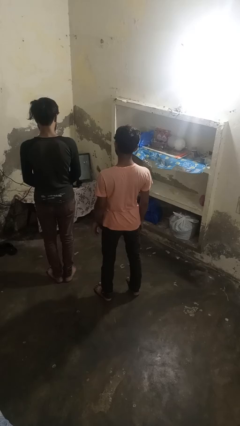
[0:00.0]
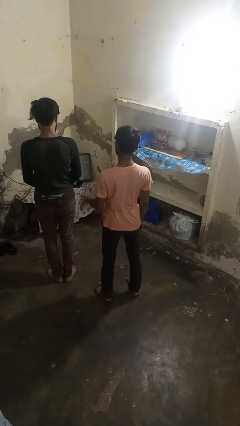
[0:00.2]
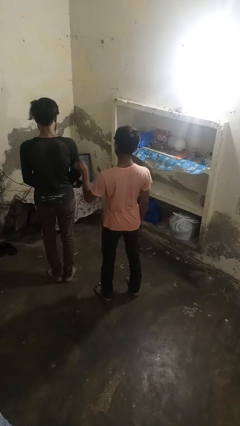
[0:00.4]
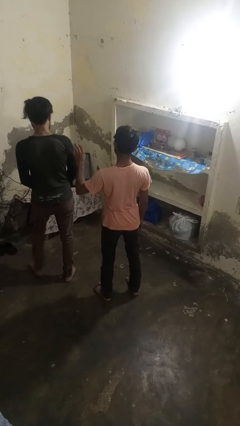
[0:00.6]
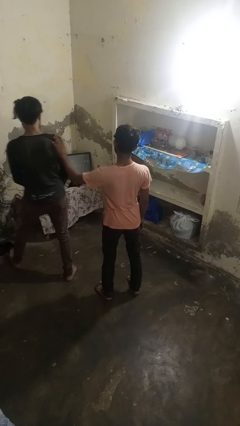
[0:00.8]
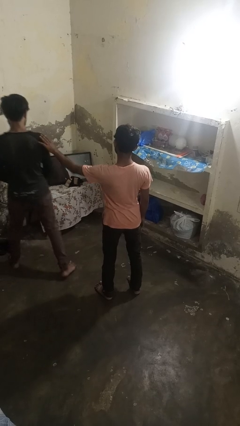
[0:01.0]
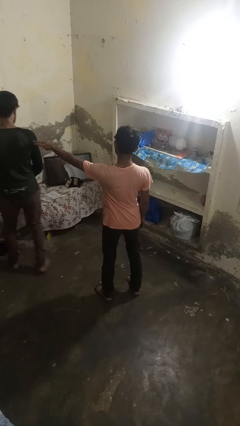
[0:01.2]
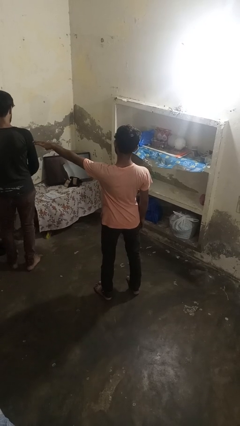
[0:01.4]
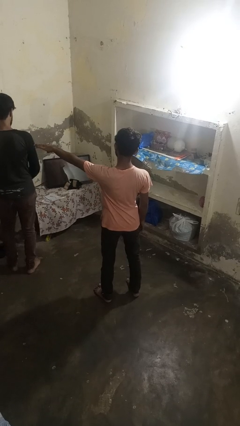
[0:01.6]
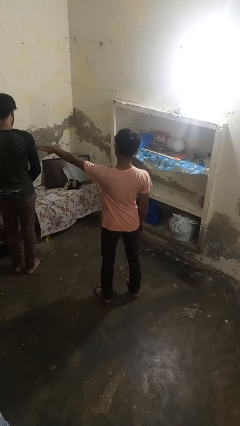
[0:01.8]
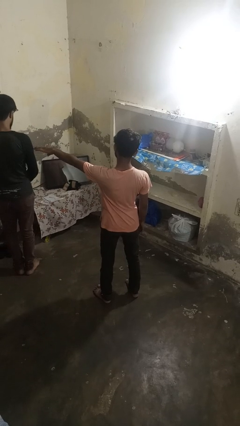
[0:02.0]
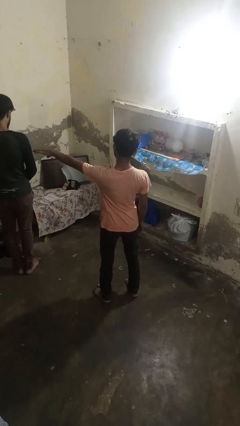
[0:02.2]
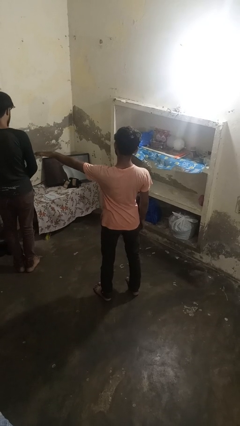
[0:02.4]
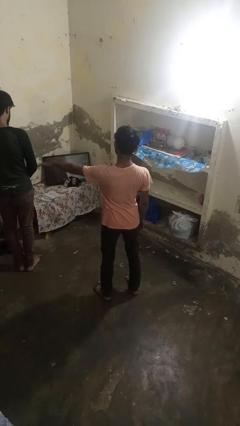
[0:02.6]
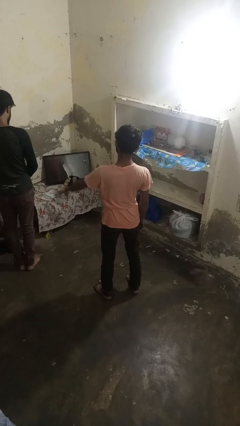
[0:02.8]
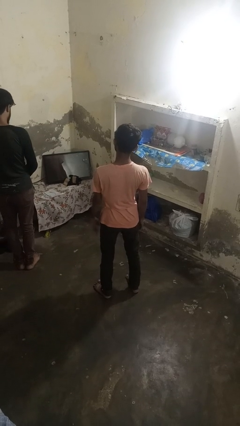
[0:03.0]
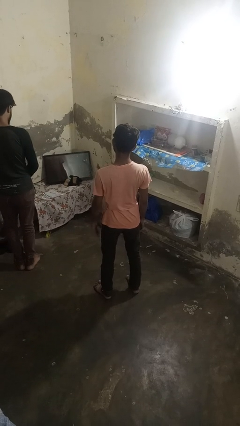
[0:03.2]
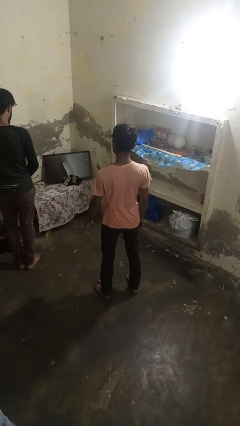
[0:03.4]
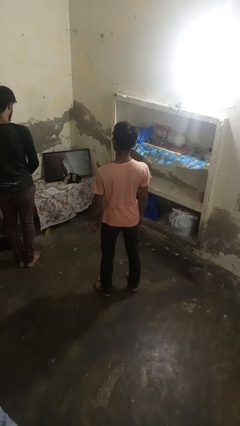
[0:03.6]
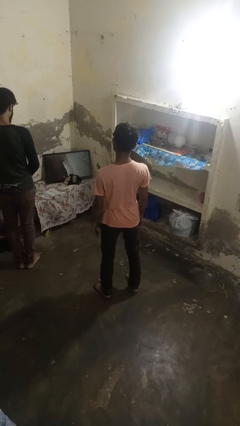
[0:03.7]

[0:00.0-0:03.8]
person shoves person

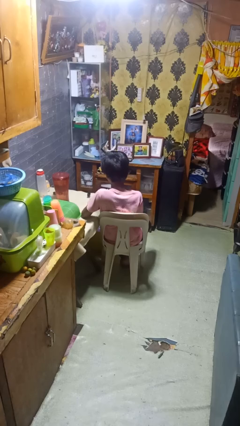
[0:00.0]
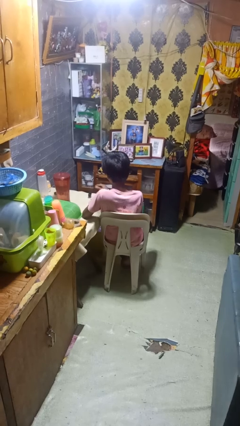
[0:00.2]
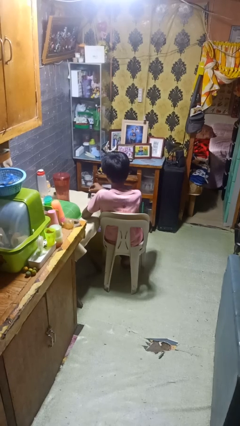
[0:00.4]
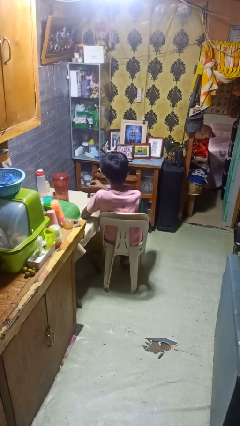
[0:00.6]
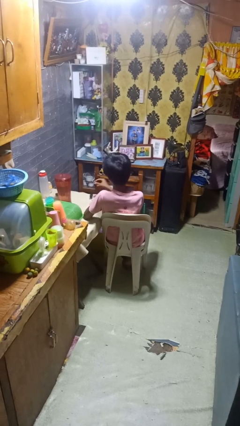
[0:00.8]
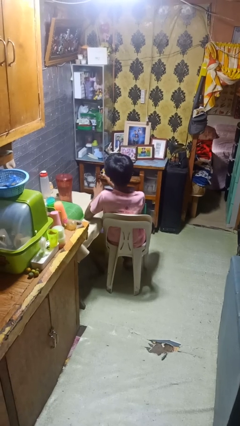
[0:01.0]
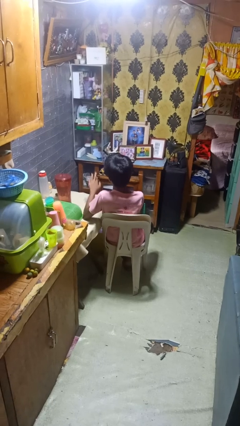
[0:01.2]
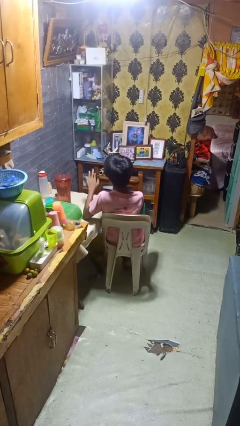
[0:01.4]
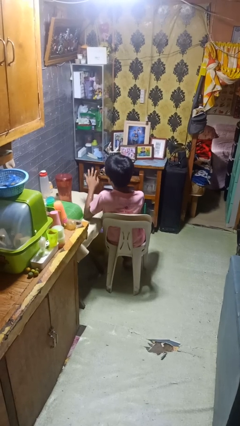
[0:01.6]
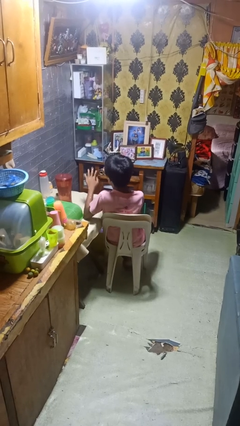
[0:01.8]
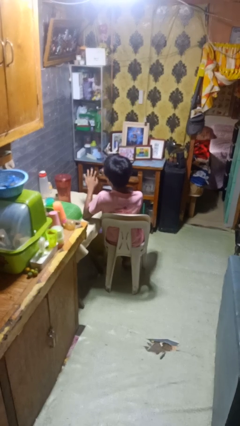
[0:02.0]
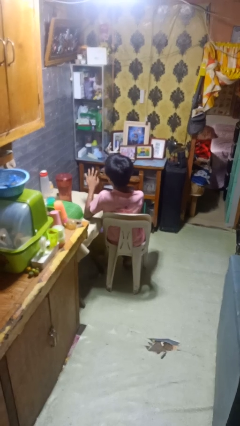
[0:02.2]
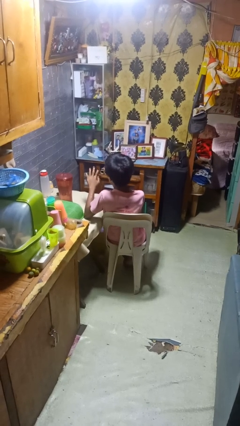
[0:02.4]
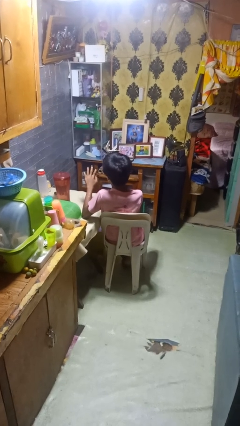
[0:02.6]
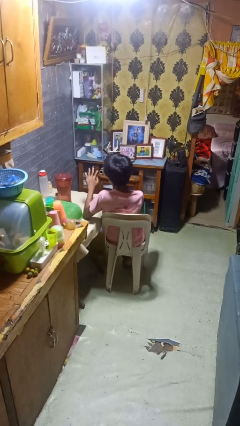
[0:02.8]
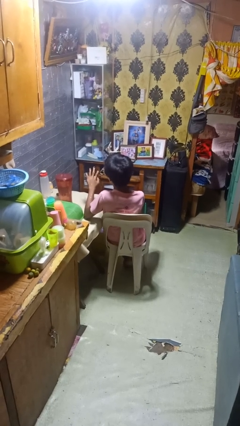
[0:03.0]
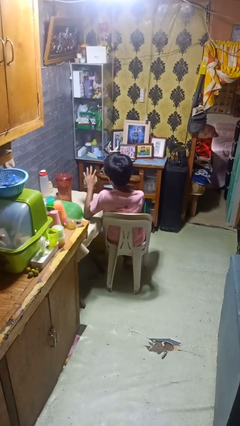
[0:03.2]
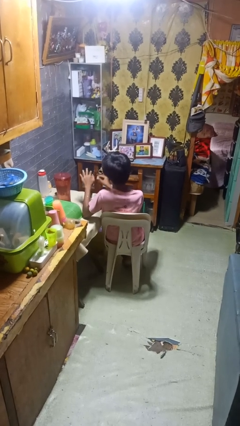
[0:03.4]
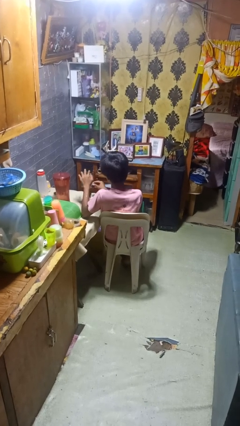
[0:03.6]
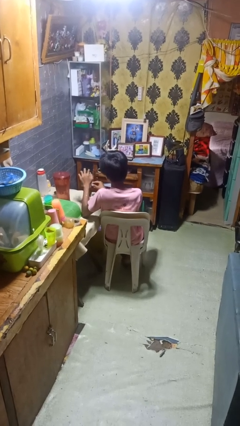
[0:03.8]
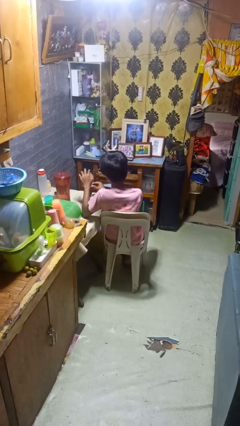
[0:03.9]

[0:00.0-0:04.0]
person paints fingernails

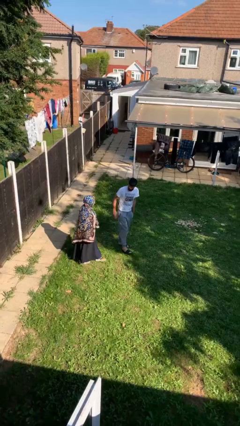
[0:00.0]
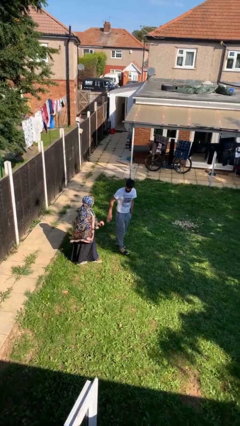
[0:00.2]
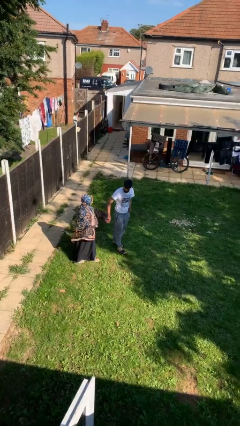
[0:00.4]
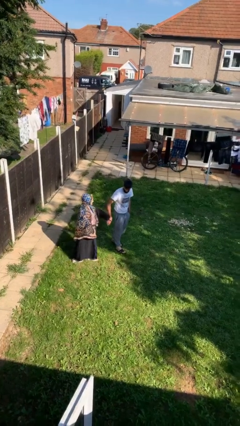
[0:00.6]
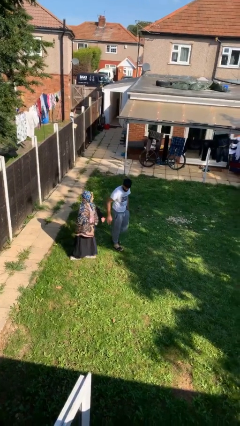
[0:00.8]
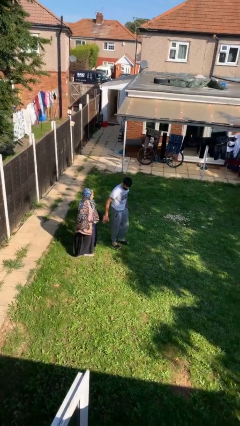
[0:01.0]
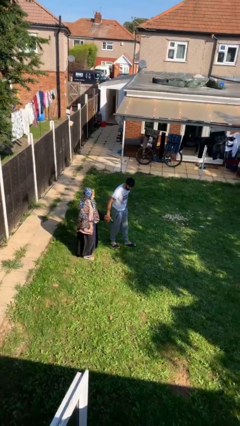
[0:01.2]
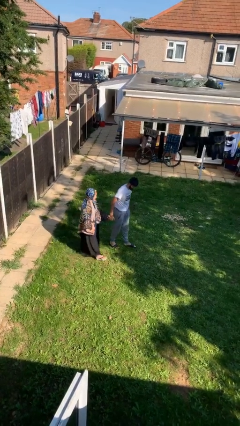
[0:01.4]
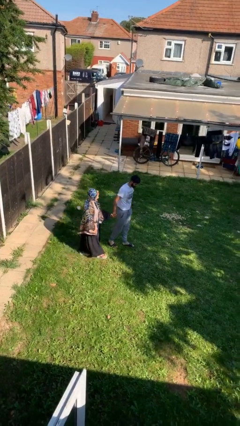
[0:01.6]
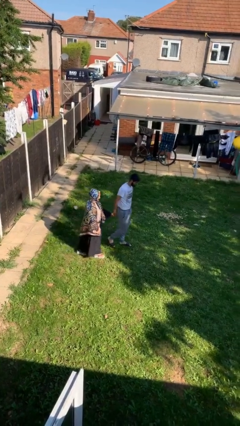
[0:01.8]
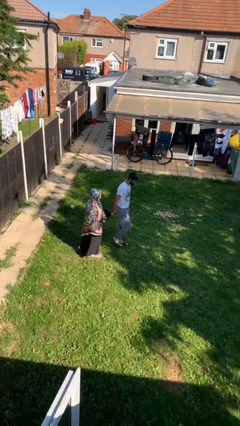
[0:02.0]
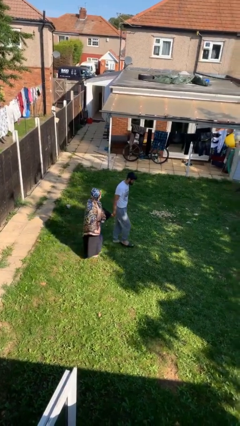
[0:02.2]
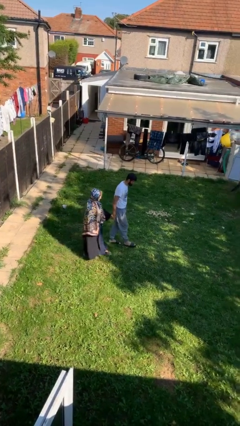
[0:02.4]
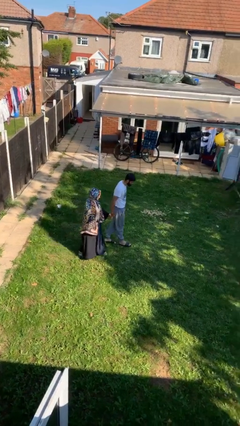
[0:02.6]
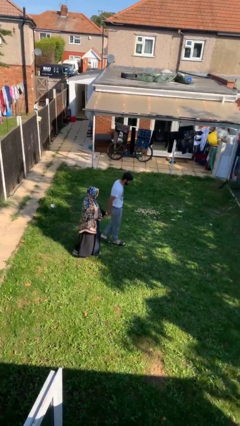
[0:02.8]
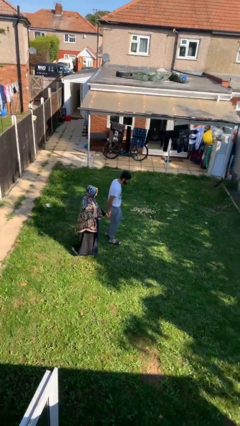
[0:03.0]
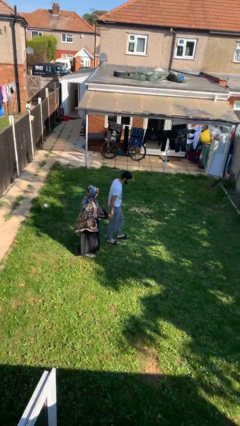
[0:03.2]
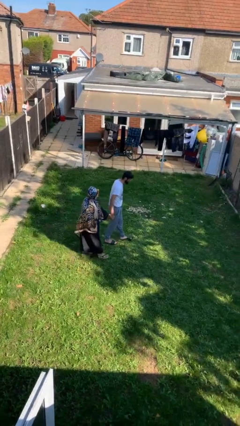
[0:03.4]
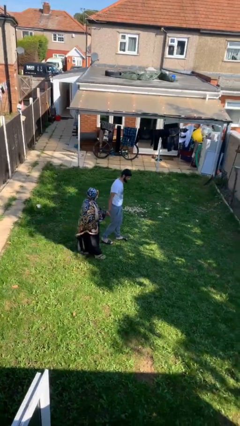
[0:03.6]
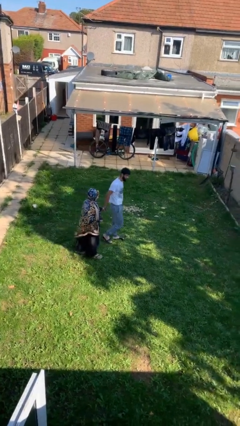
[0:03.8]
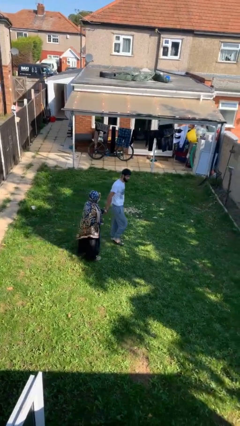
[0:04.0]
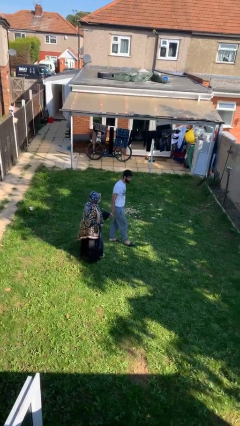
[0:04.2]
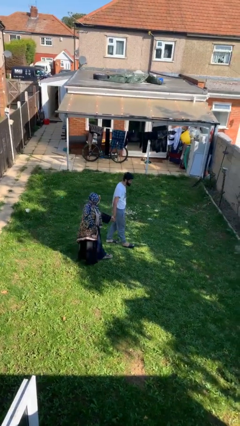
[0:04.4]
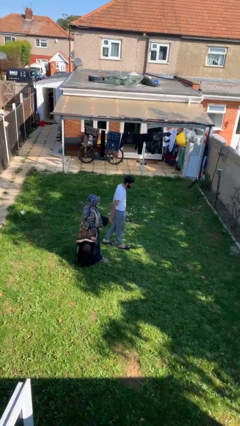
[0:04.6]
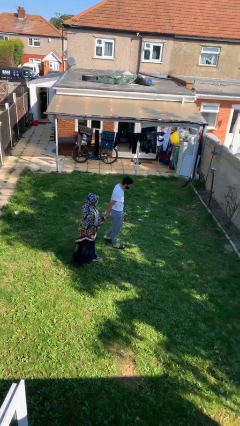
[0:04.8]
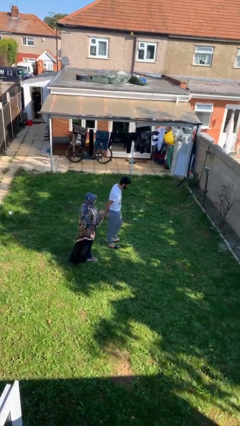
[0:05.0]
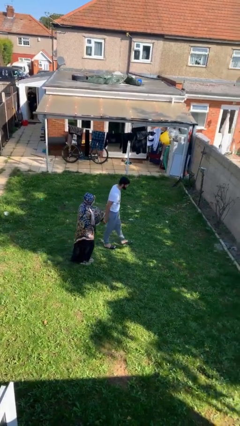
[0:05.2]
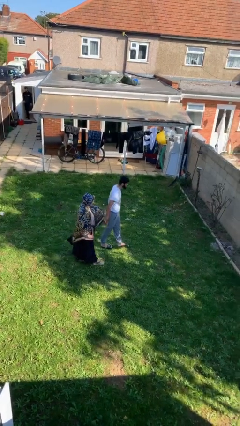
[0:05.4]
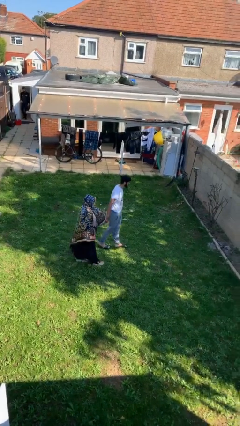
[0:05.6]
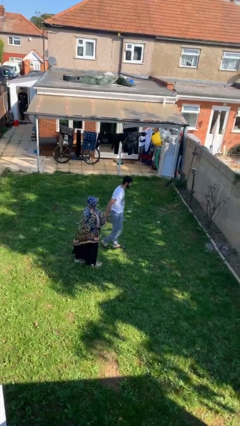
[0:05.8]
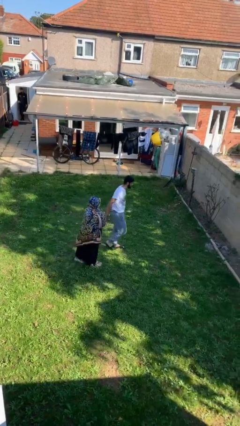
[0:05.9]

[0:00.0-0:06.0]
person holds hand

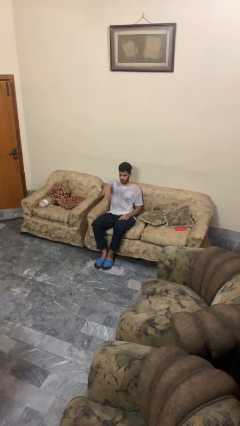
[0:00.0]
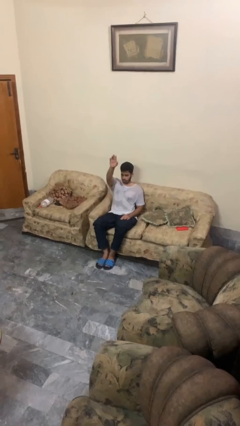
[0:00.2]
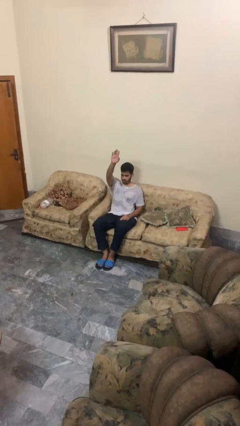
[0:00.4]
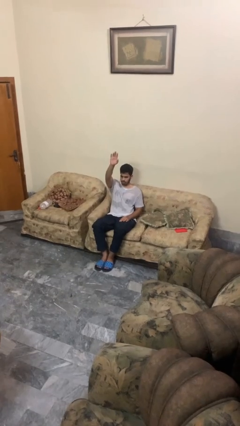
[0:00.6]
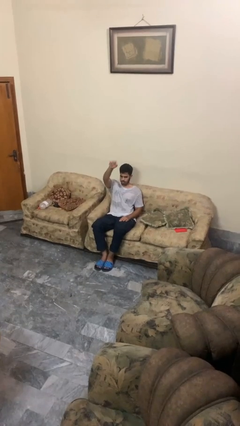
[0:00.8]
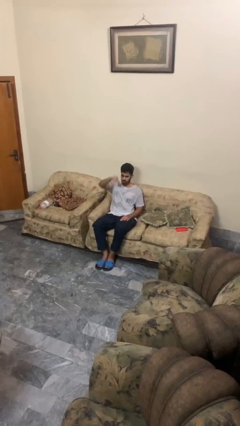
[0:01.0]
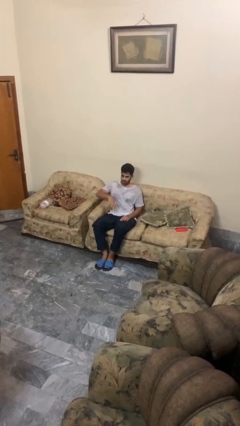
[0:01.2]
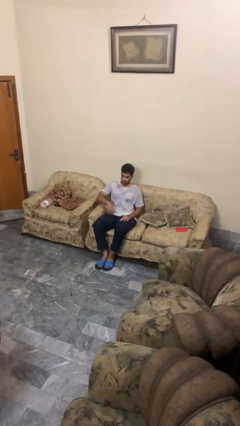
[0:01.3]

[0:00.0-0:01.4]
person gestures swipe up

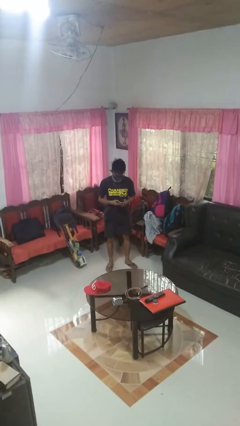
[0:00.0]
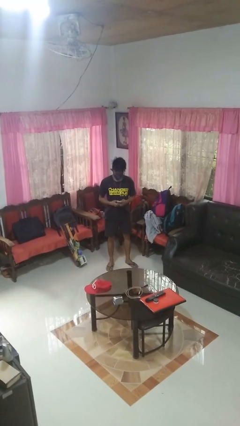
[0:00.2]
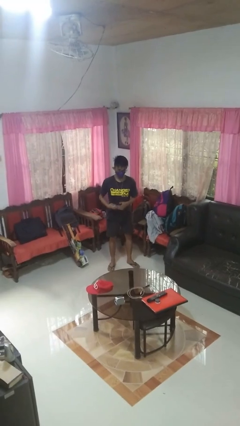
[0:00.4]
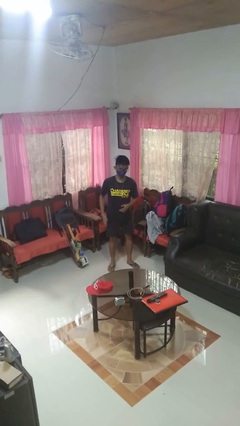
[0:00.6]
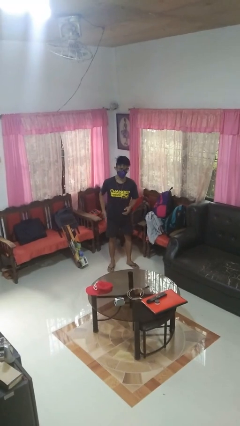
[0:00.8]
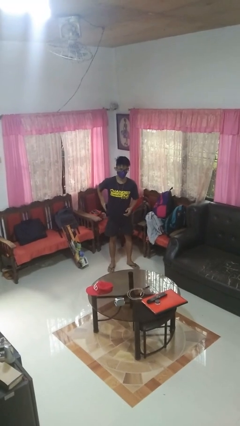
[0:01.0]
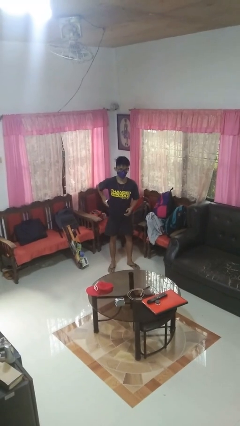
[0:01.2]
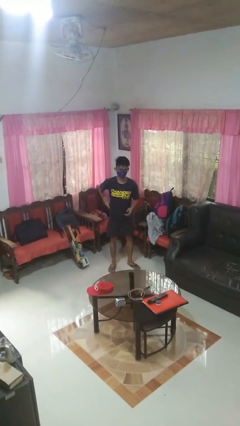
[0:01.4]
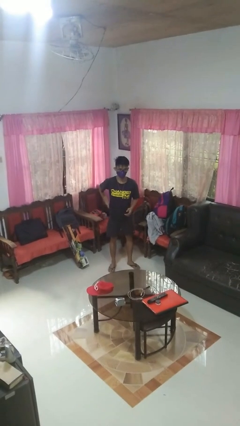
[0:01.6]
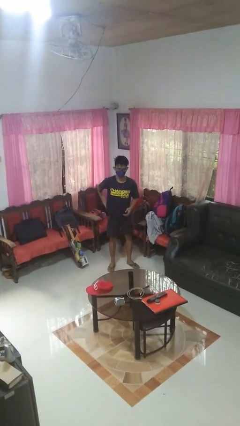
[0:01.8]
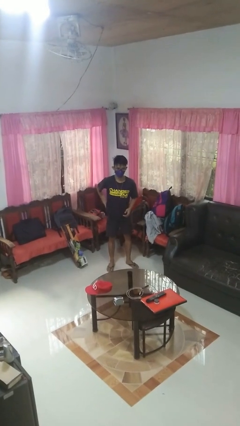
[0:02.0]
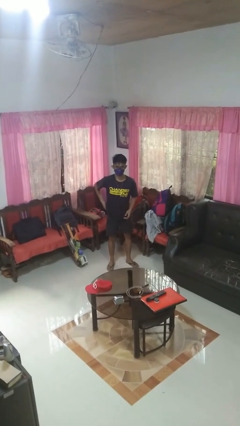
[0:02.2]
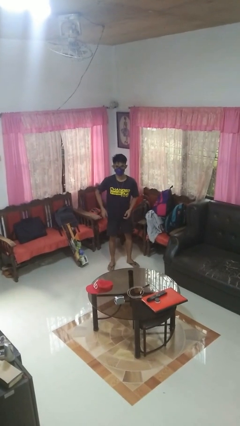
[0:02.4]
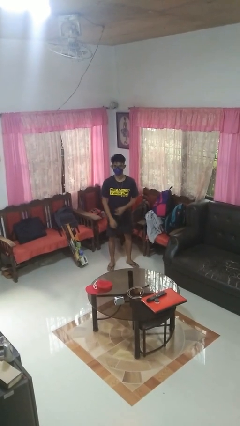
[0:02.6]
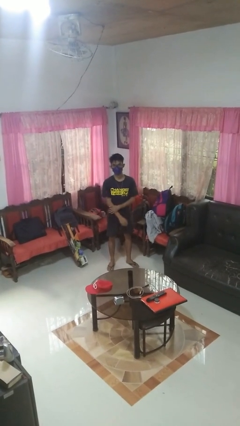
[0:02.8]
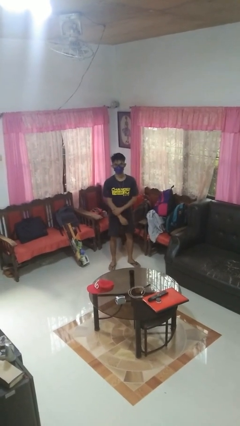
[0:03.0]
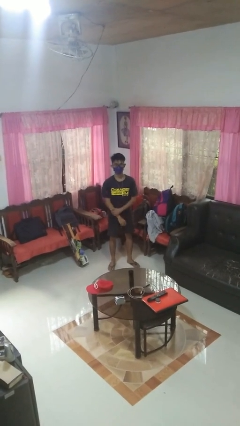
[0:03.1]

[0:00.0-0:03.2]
person puts phone into pocket
